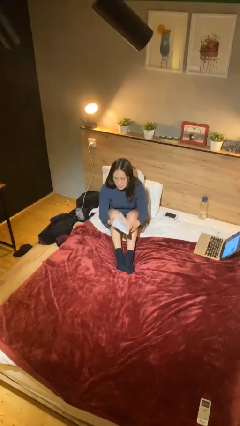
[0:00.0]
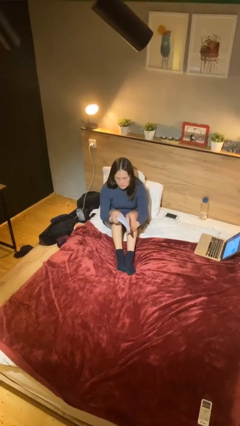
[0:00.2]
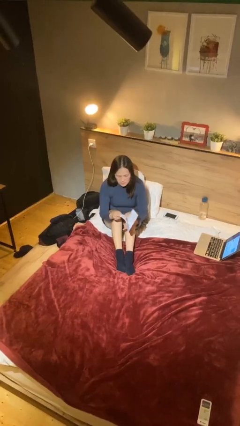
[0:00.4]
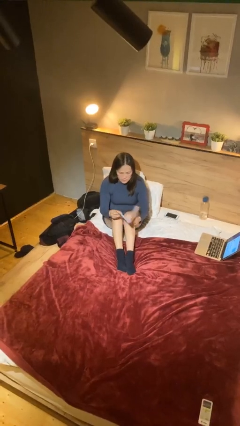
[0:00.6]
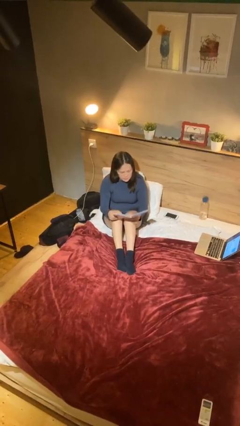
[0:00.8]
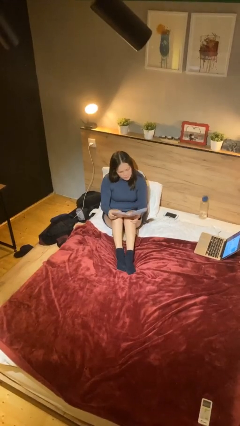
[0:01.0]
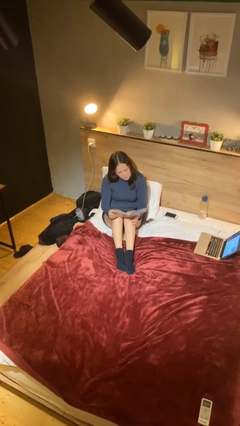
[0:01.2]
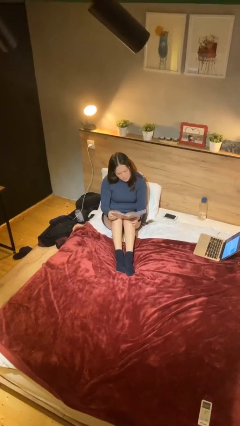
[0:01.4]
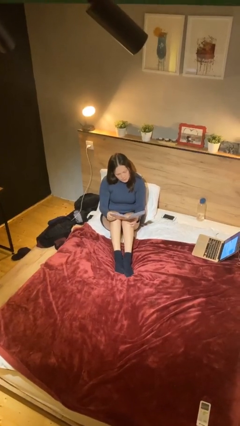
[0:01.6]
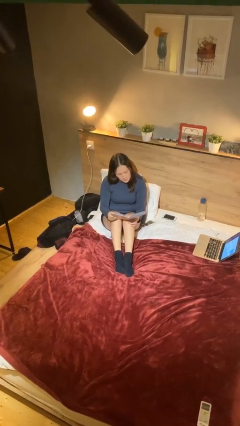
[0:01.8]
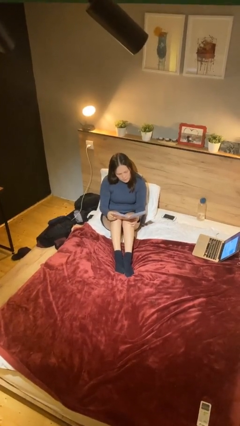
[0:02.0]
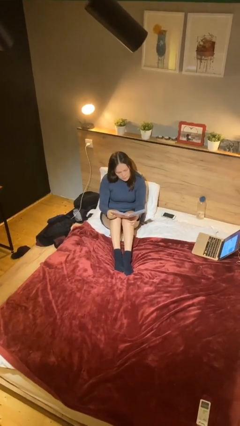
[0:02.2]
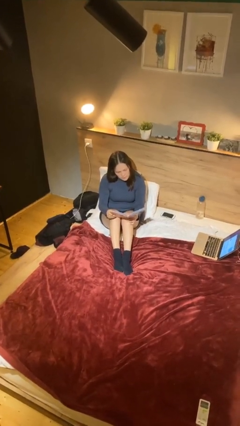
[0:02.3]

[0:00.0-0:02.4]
person reads document

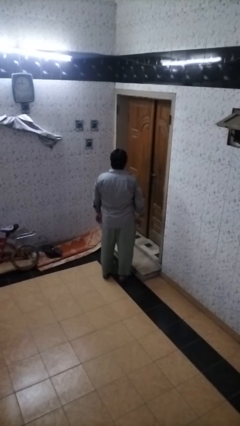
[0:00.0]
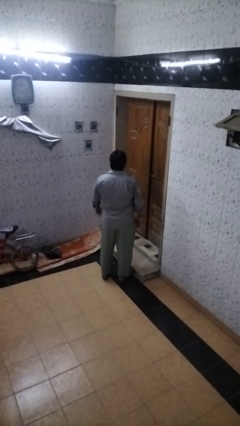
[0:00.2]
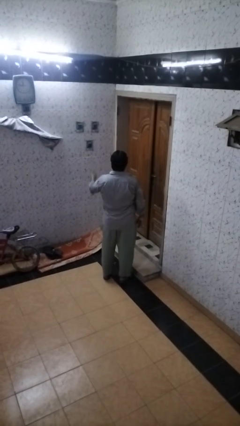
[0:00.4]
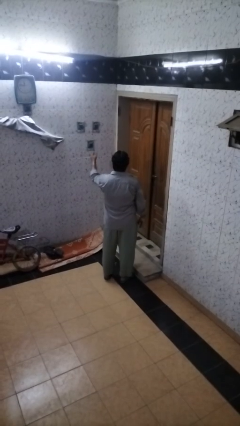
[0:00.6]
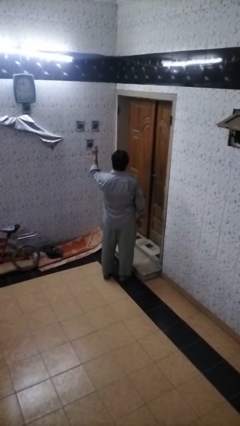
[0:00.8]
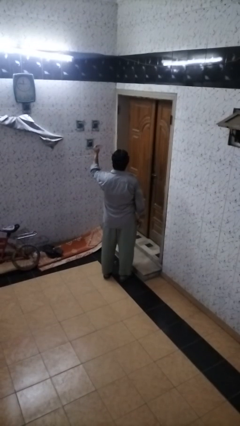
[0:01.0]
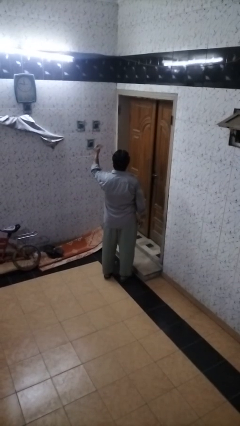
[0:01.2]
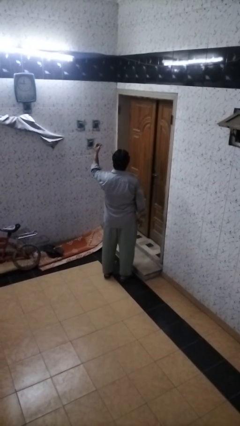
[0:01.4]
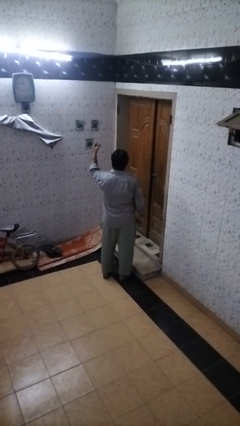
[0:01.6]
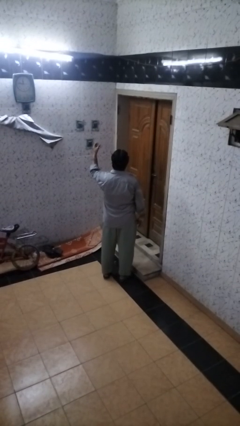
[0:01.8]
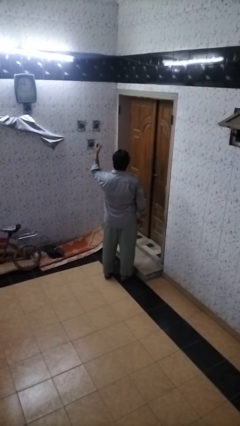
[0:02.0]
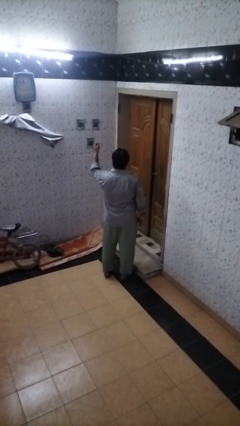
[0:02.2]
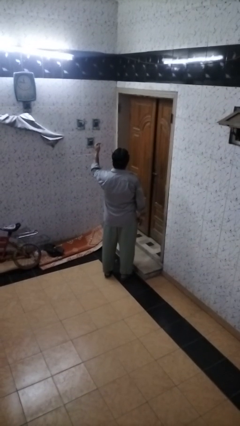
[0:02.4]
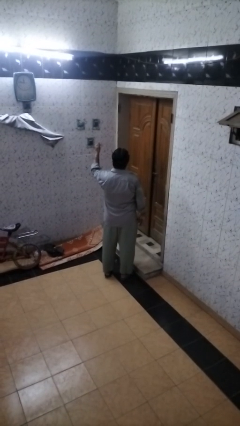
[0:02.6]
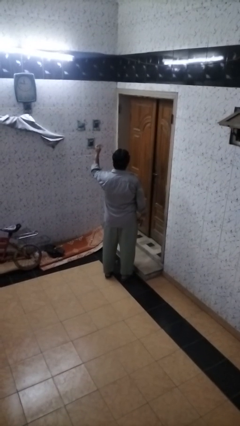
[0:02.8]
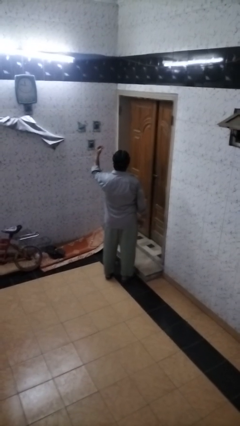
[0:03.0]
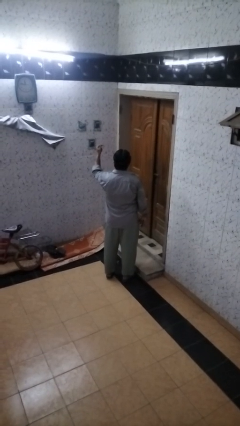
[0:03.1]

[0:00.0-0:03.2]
person snaps fingers

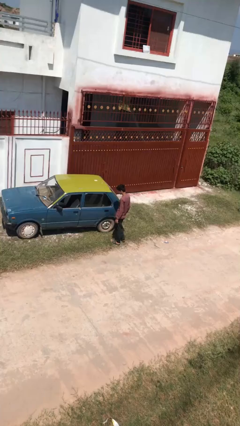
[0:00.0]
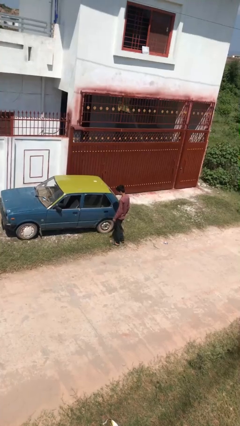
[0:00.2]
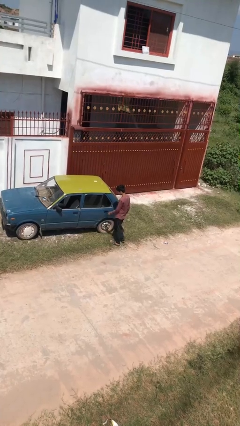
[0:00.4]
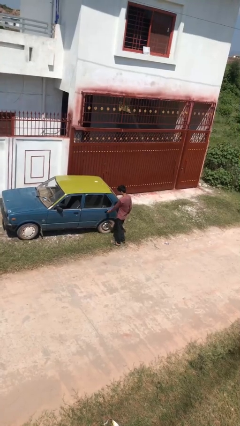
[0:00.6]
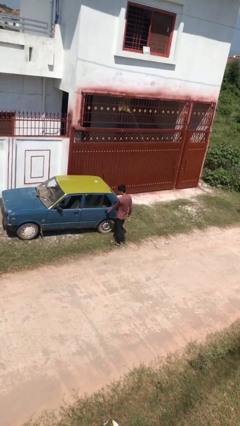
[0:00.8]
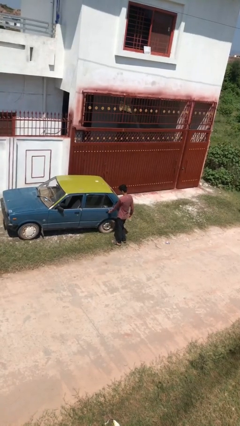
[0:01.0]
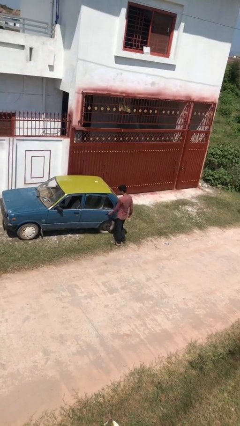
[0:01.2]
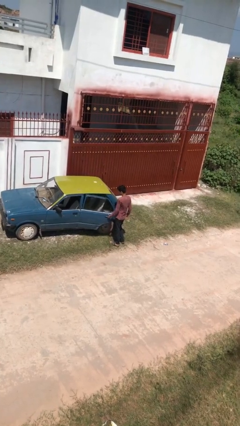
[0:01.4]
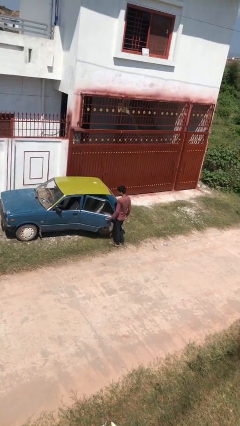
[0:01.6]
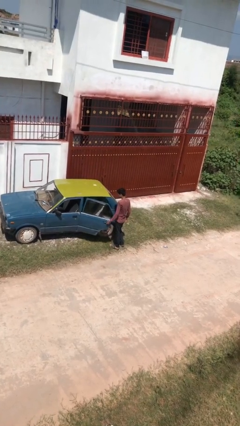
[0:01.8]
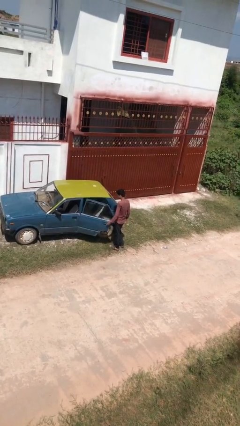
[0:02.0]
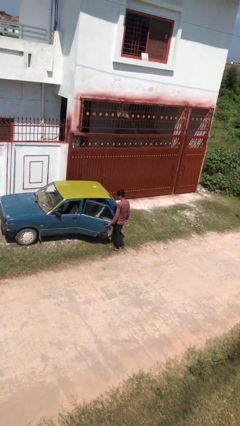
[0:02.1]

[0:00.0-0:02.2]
person opens car door

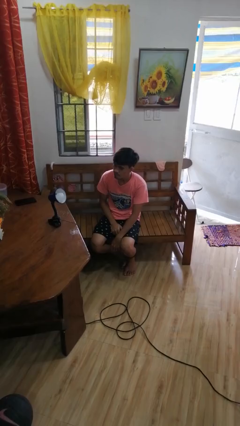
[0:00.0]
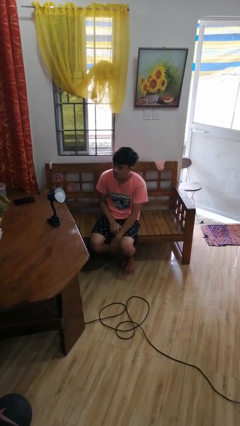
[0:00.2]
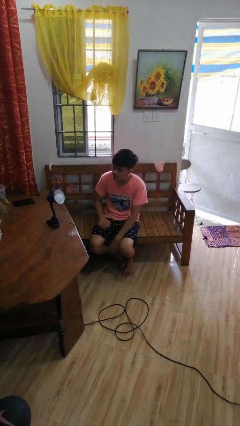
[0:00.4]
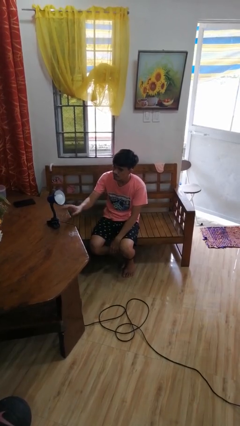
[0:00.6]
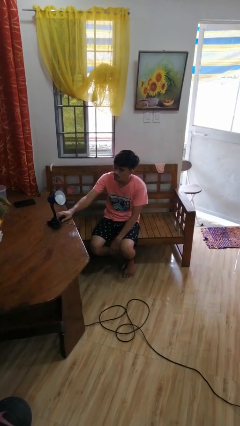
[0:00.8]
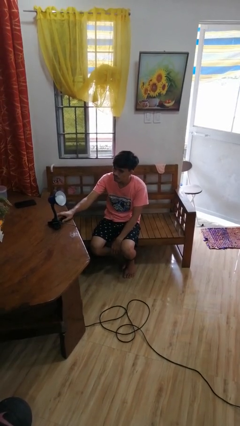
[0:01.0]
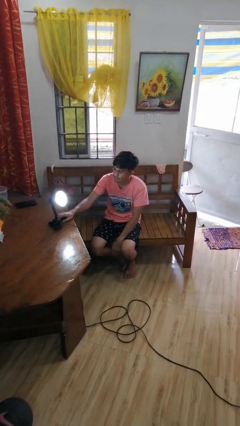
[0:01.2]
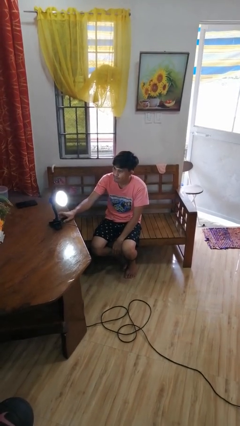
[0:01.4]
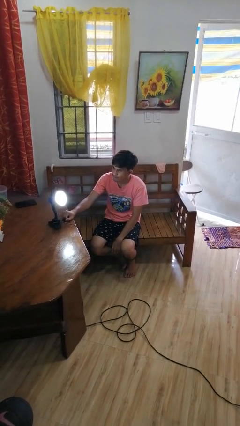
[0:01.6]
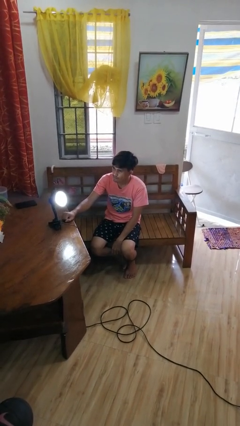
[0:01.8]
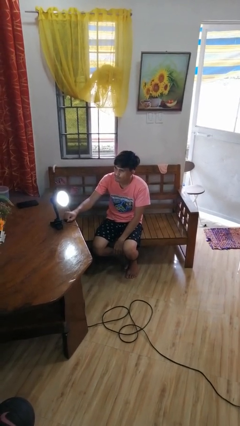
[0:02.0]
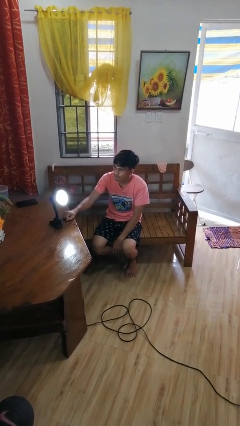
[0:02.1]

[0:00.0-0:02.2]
person turns on lamp

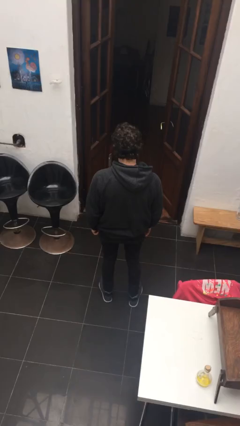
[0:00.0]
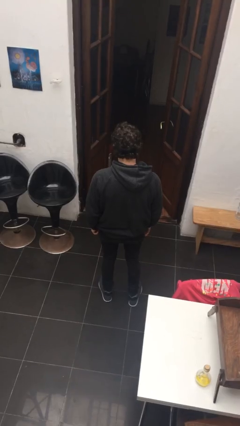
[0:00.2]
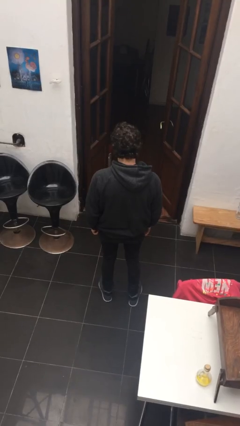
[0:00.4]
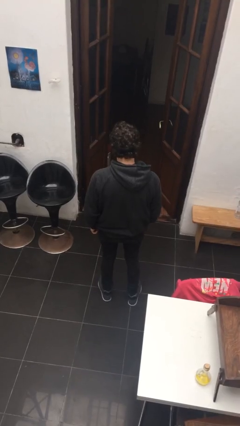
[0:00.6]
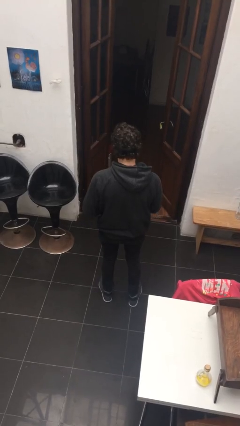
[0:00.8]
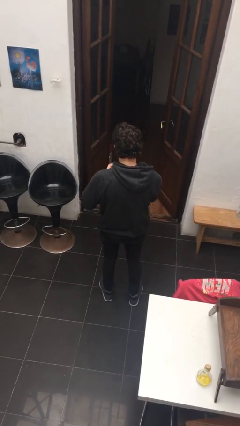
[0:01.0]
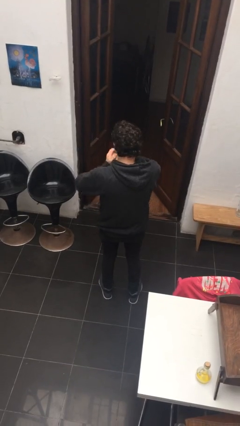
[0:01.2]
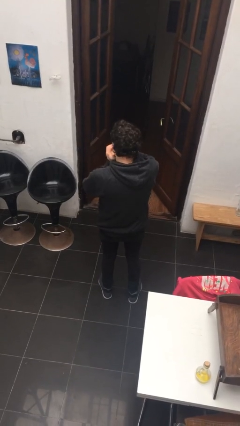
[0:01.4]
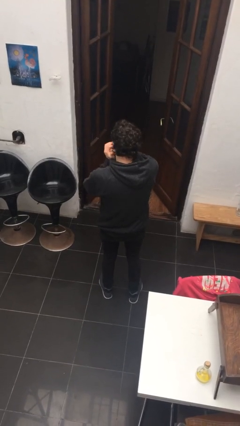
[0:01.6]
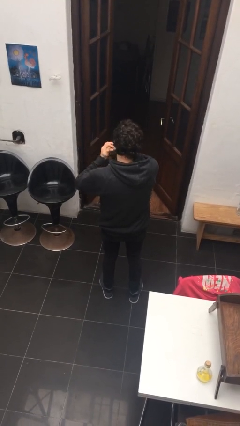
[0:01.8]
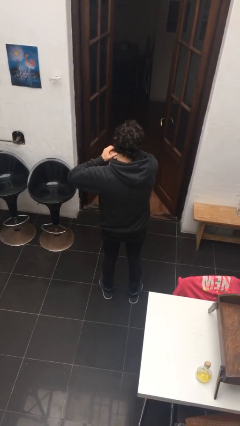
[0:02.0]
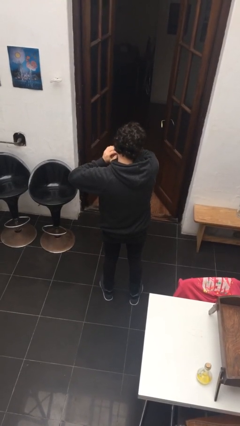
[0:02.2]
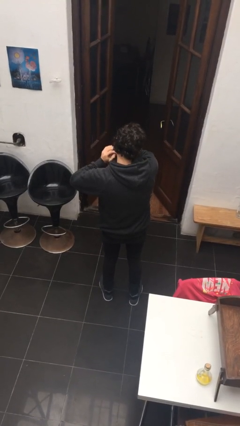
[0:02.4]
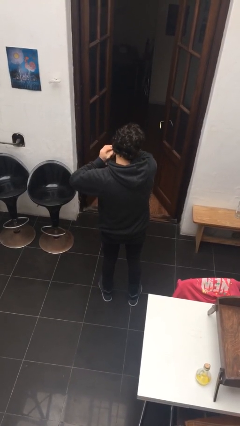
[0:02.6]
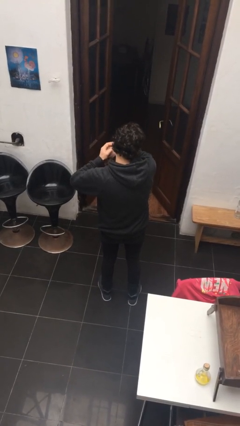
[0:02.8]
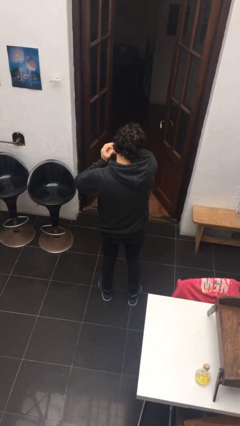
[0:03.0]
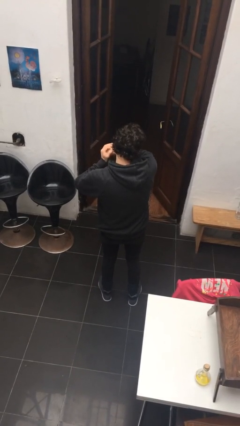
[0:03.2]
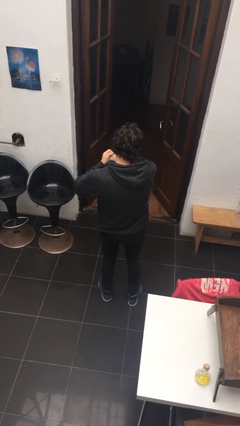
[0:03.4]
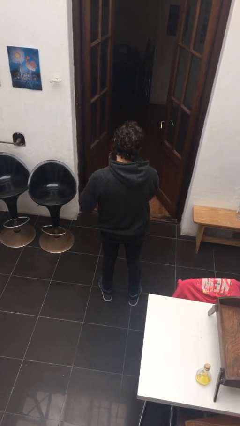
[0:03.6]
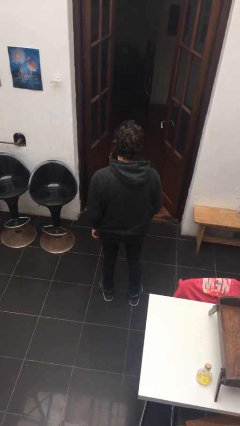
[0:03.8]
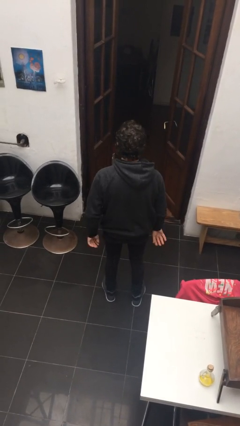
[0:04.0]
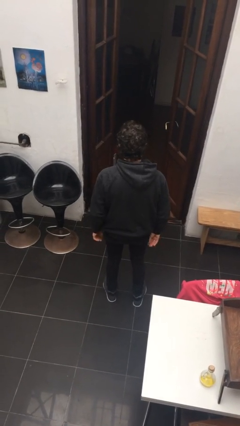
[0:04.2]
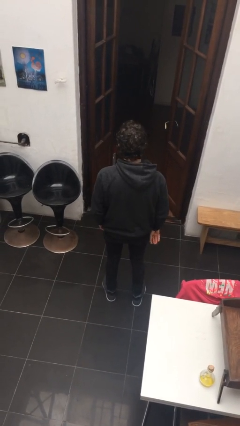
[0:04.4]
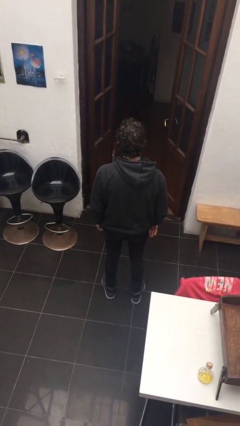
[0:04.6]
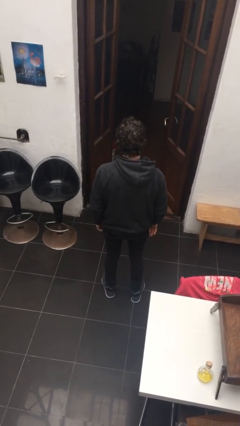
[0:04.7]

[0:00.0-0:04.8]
person cracks knuckles

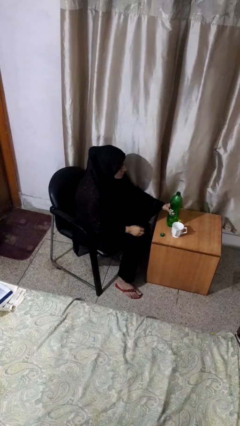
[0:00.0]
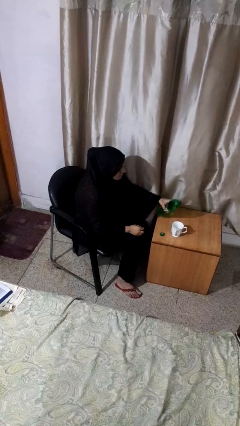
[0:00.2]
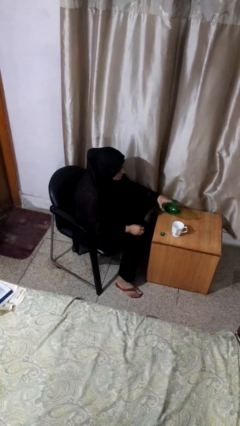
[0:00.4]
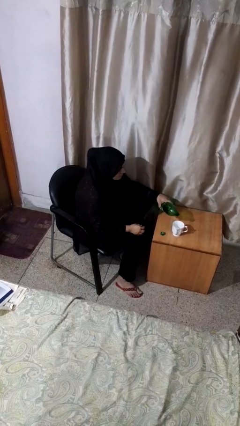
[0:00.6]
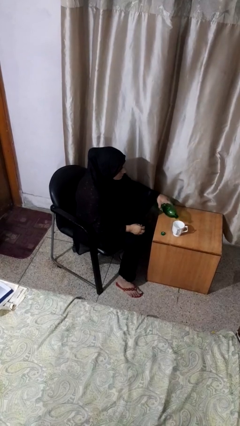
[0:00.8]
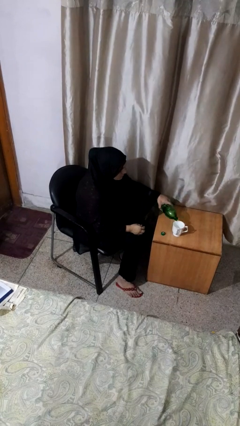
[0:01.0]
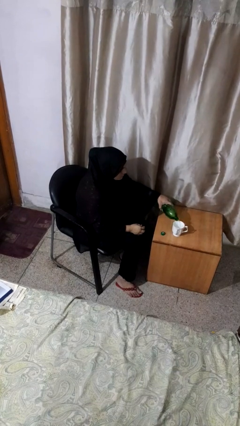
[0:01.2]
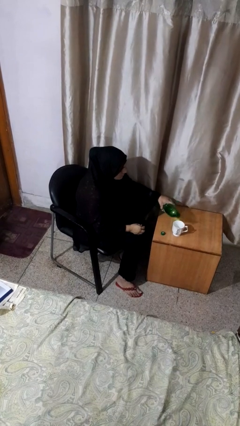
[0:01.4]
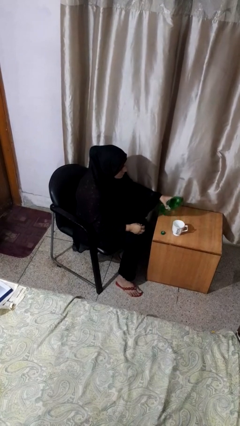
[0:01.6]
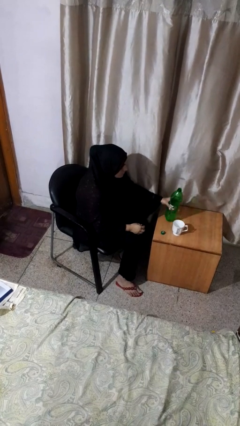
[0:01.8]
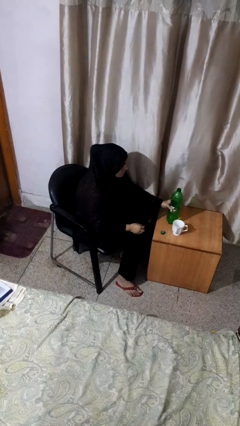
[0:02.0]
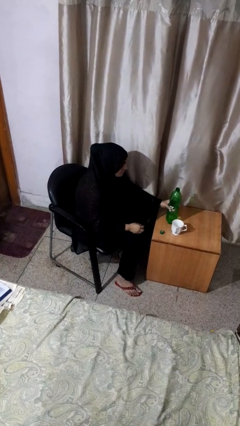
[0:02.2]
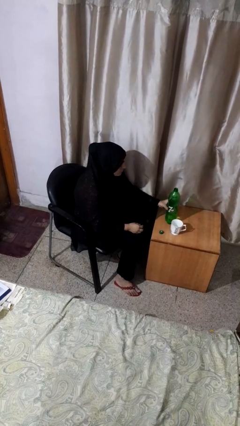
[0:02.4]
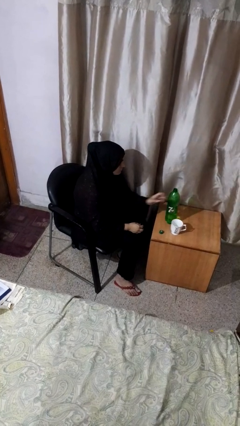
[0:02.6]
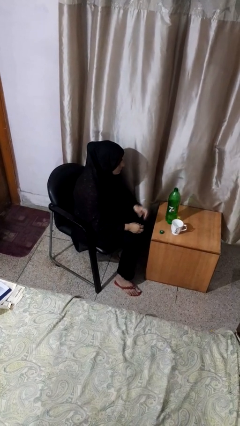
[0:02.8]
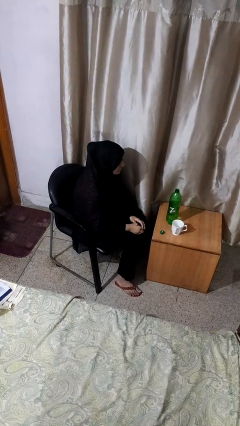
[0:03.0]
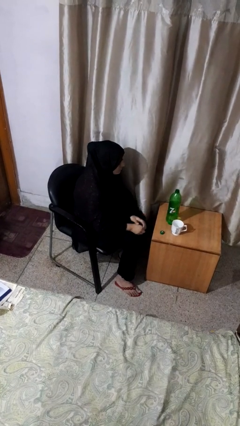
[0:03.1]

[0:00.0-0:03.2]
person pours liquid into cup
